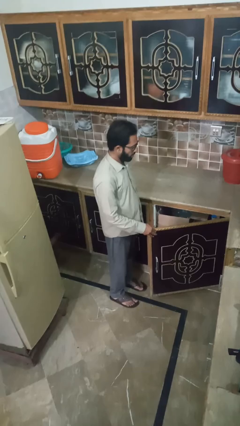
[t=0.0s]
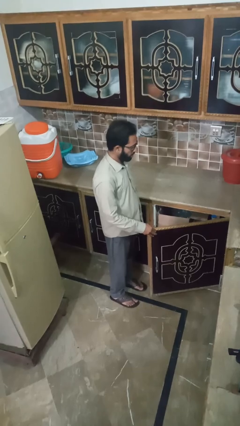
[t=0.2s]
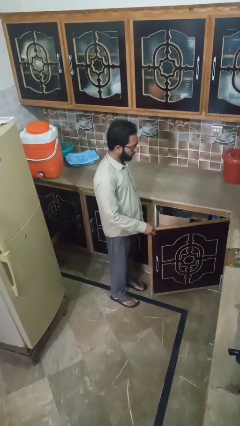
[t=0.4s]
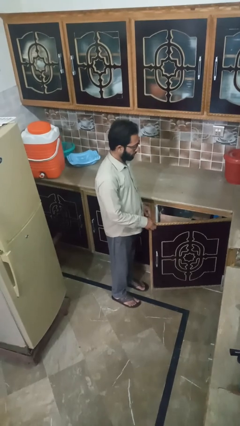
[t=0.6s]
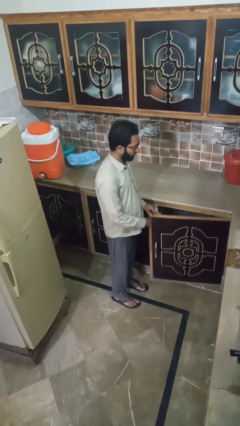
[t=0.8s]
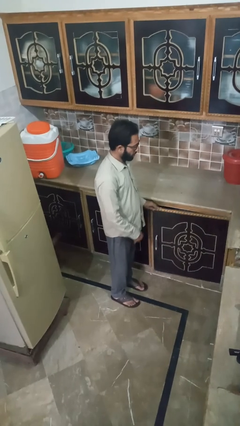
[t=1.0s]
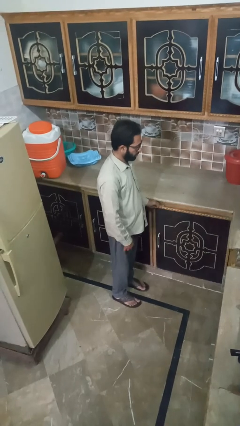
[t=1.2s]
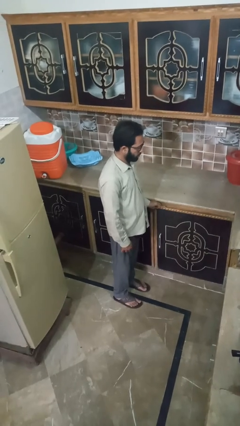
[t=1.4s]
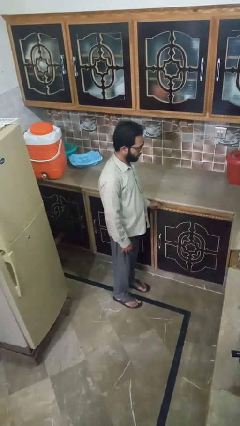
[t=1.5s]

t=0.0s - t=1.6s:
person closes cabinet

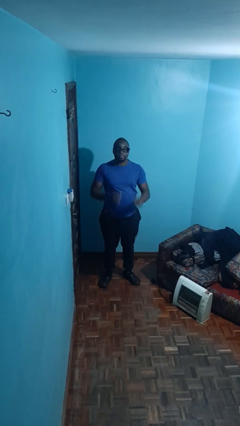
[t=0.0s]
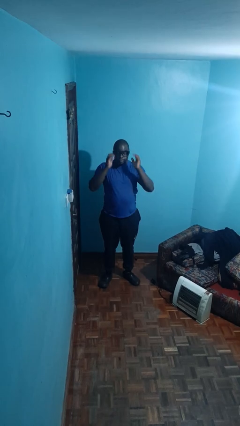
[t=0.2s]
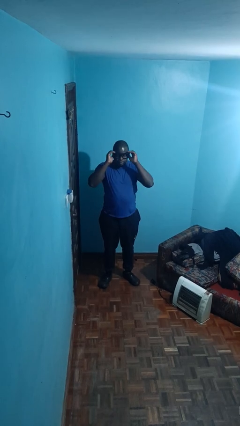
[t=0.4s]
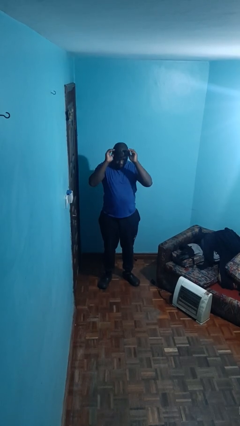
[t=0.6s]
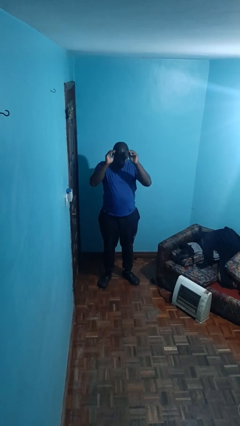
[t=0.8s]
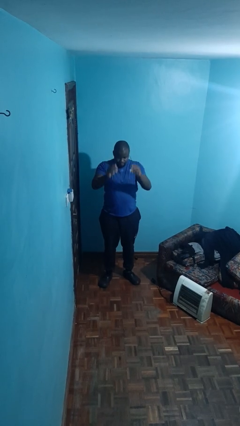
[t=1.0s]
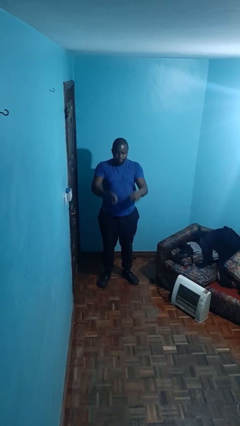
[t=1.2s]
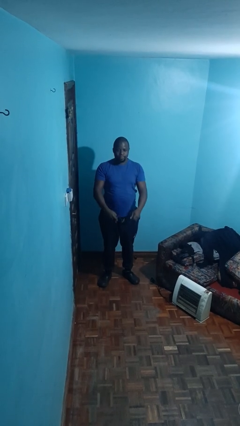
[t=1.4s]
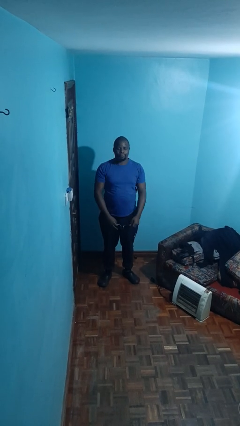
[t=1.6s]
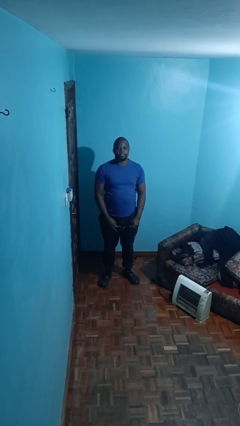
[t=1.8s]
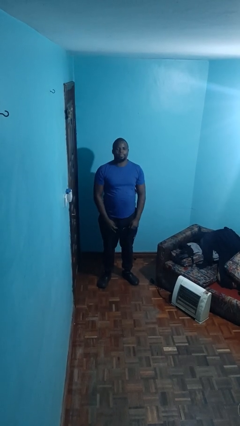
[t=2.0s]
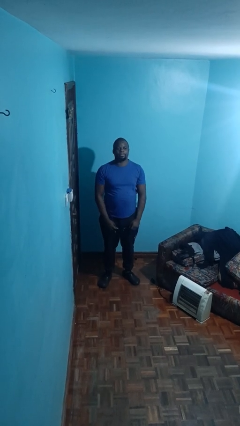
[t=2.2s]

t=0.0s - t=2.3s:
person takes off glasses

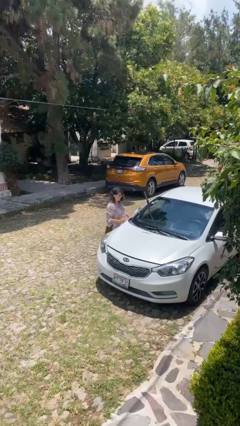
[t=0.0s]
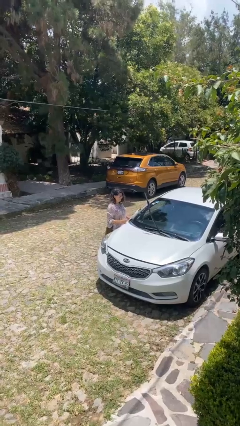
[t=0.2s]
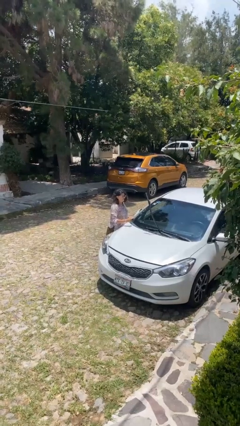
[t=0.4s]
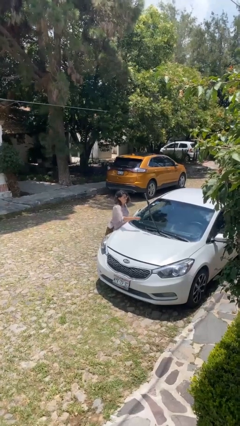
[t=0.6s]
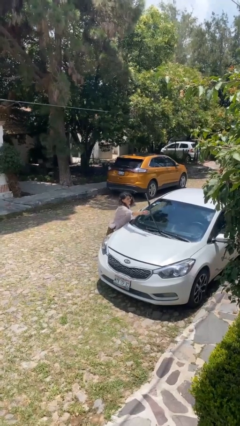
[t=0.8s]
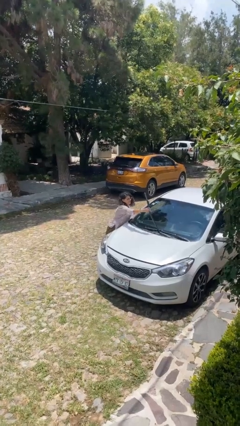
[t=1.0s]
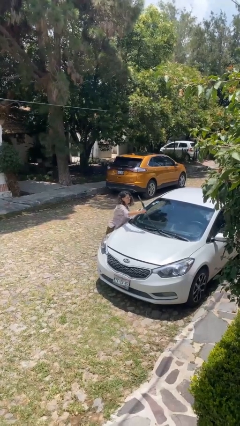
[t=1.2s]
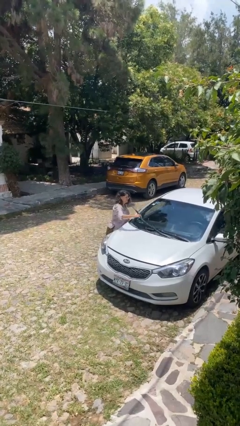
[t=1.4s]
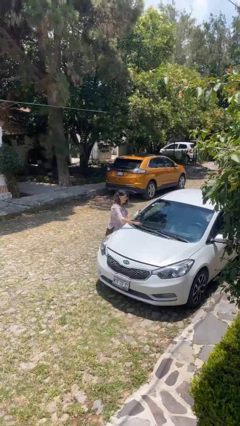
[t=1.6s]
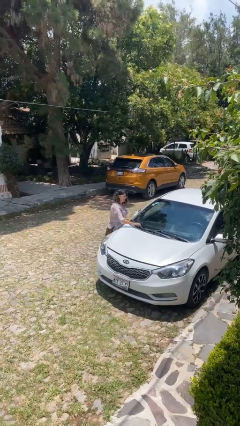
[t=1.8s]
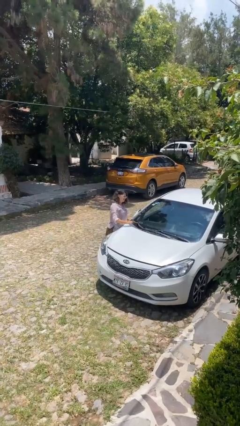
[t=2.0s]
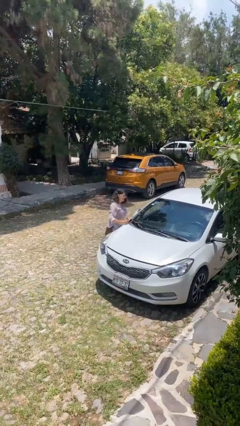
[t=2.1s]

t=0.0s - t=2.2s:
person flips down car wipers

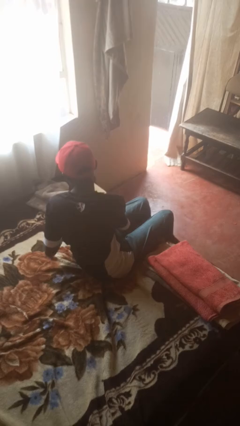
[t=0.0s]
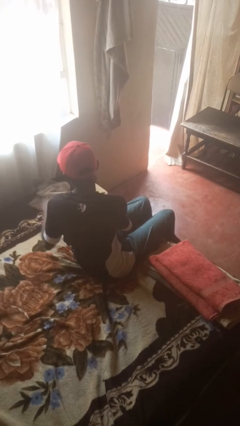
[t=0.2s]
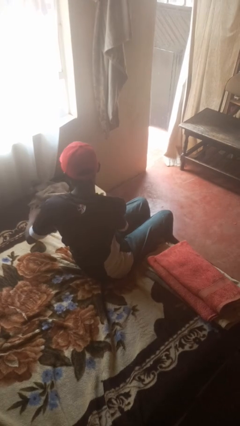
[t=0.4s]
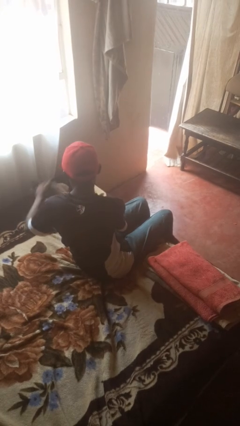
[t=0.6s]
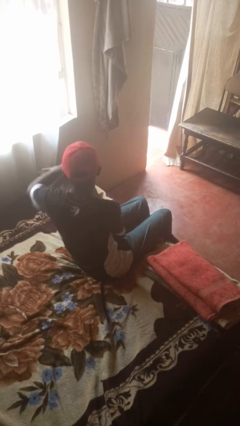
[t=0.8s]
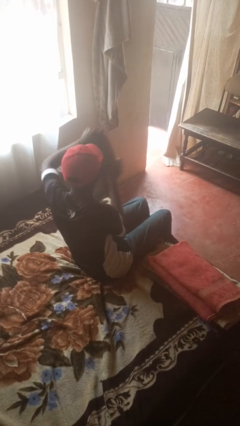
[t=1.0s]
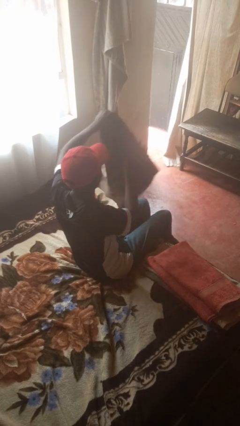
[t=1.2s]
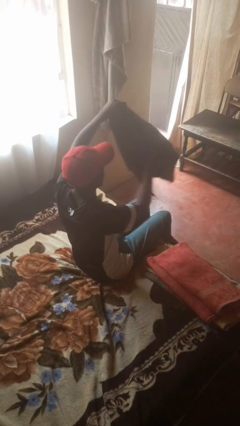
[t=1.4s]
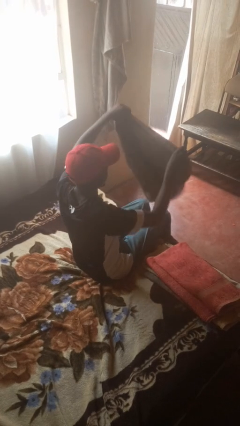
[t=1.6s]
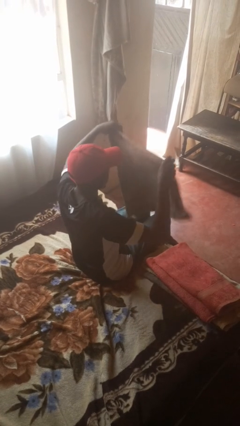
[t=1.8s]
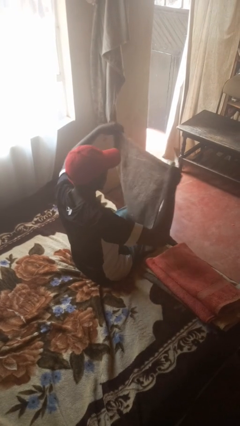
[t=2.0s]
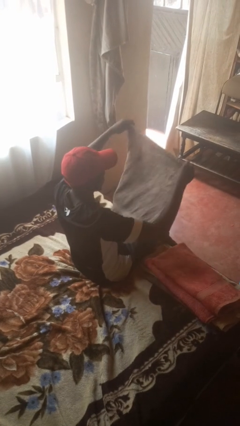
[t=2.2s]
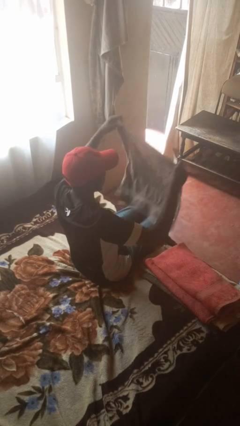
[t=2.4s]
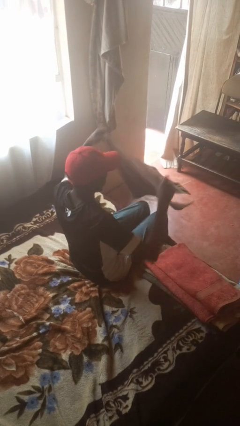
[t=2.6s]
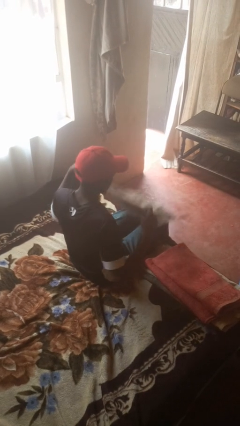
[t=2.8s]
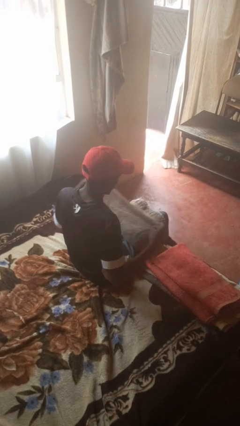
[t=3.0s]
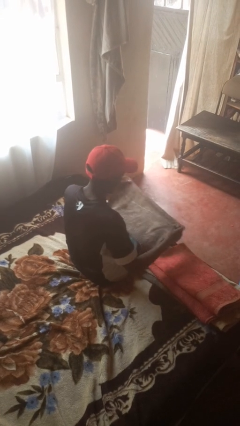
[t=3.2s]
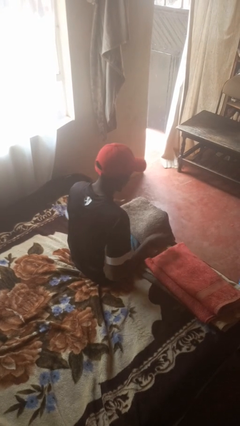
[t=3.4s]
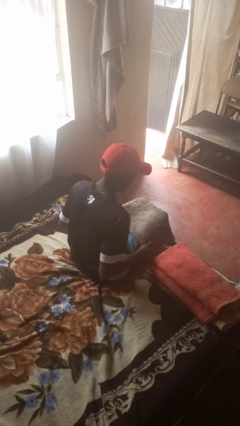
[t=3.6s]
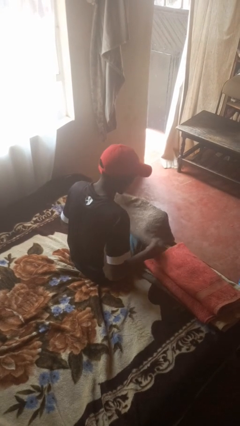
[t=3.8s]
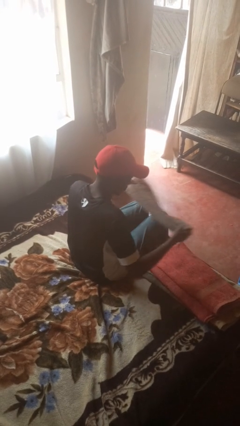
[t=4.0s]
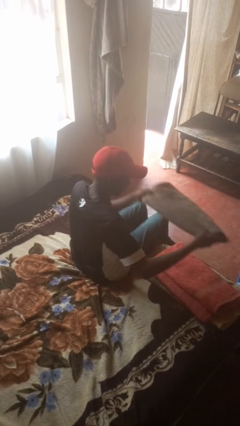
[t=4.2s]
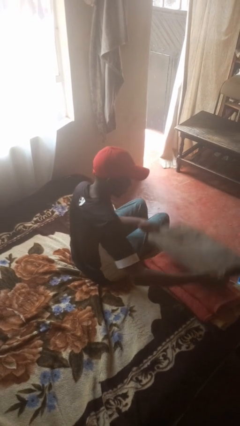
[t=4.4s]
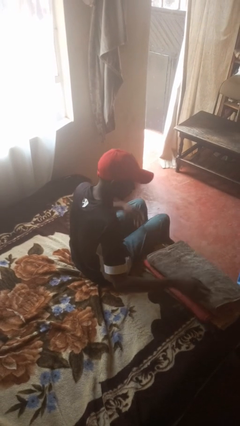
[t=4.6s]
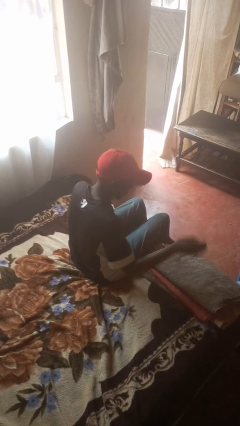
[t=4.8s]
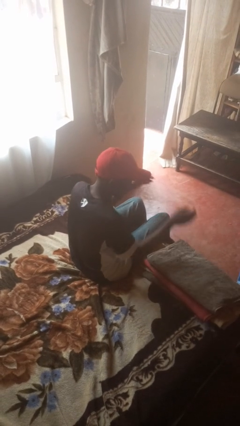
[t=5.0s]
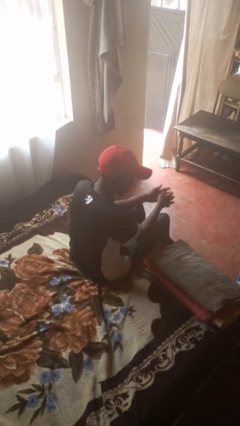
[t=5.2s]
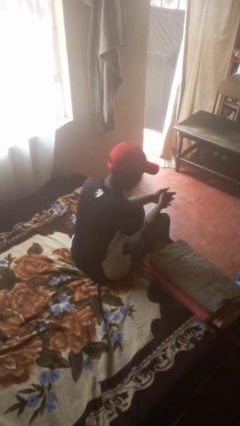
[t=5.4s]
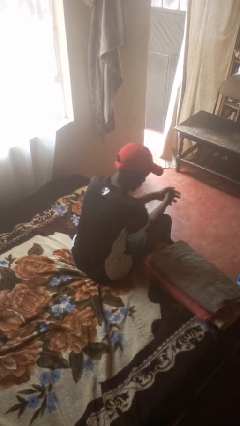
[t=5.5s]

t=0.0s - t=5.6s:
person folds towel

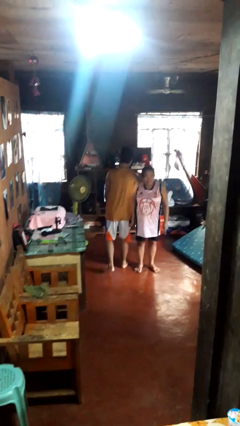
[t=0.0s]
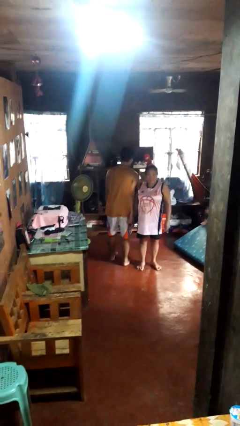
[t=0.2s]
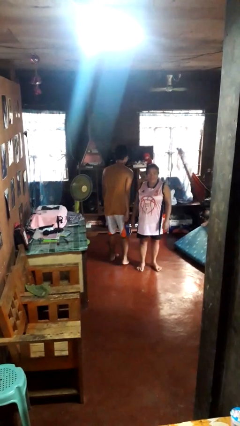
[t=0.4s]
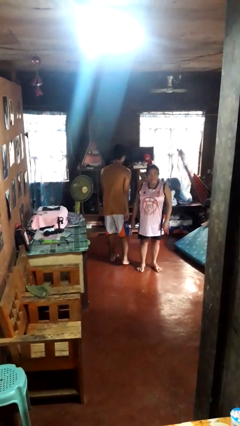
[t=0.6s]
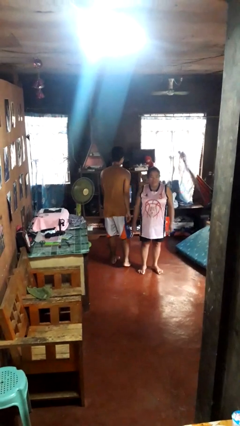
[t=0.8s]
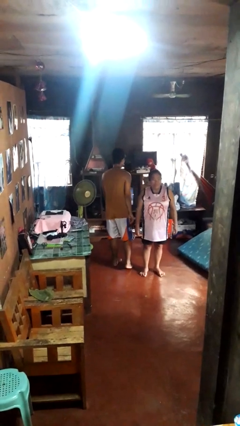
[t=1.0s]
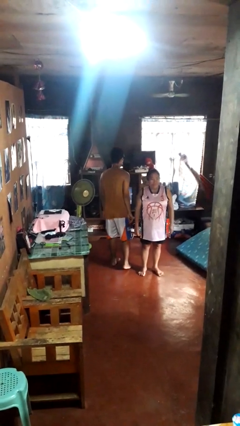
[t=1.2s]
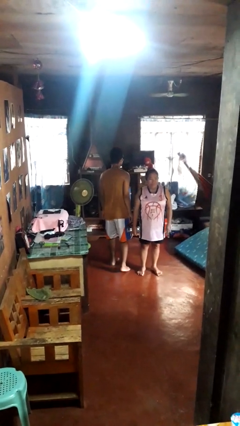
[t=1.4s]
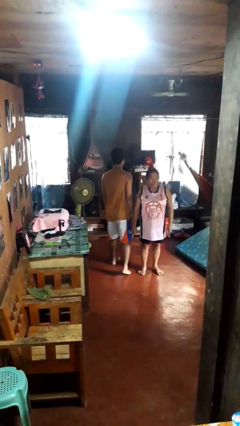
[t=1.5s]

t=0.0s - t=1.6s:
person bumps into person

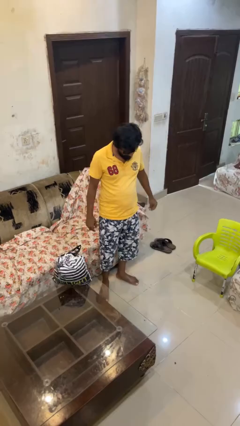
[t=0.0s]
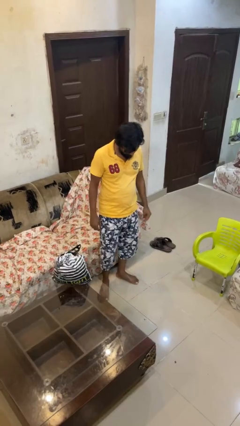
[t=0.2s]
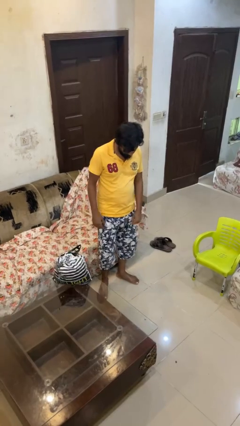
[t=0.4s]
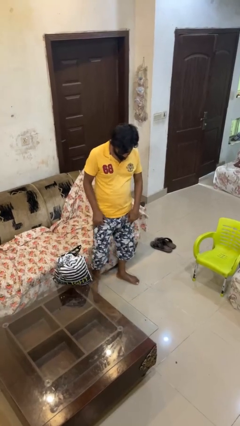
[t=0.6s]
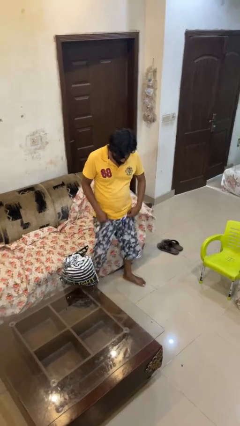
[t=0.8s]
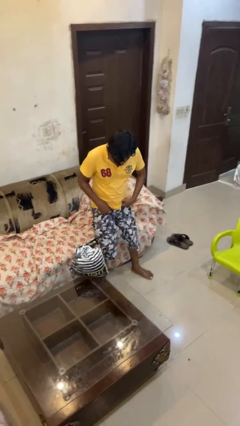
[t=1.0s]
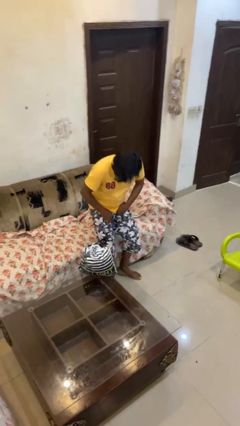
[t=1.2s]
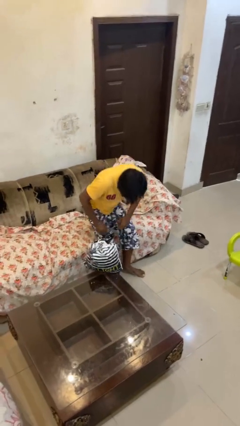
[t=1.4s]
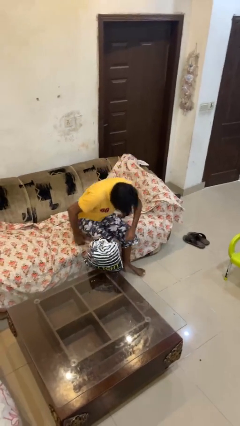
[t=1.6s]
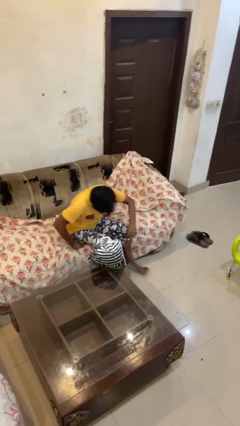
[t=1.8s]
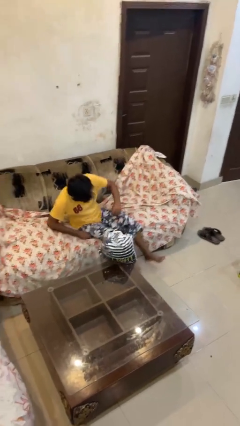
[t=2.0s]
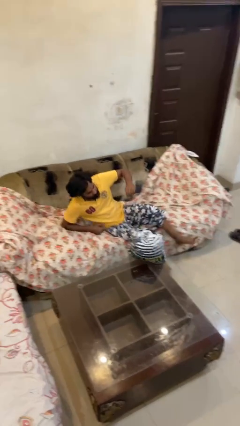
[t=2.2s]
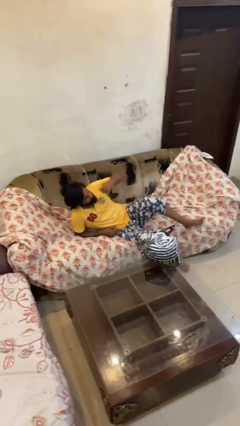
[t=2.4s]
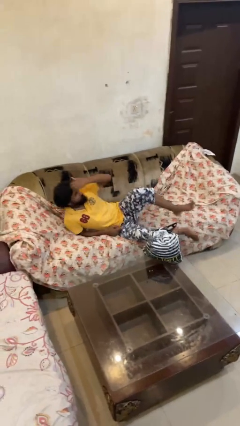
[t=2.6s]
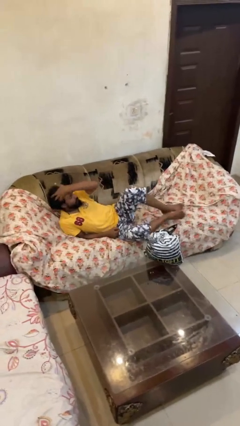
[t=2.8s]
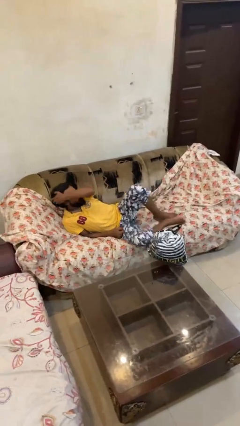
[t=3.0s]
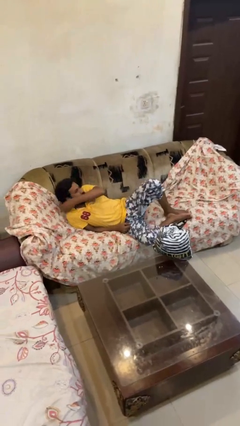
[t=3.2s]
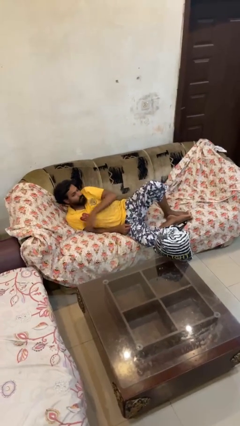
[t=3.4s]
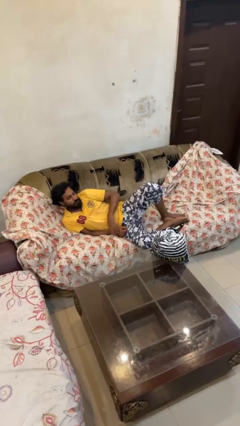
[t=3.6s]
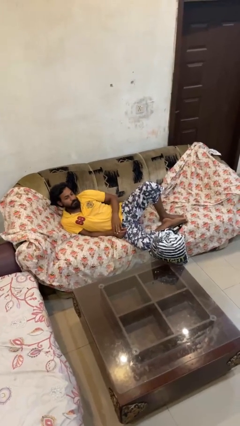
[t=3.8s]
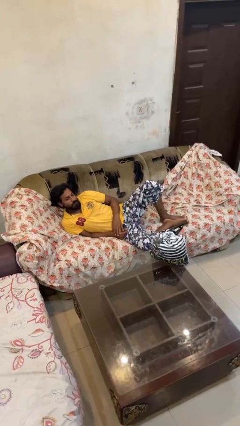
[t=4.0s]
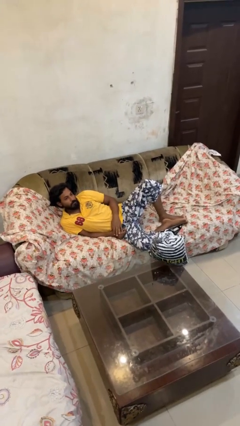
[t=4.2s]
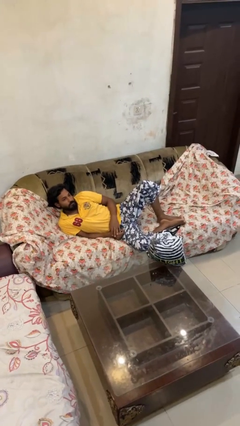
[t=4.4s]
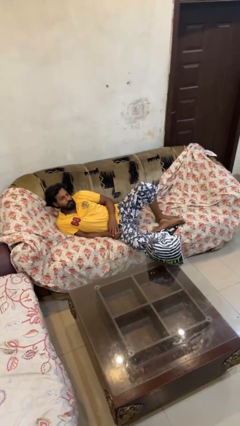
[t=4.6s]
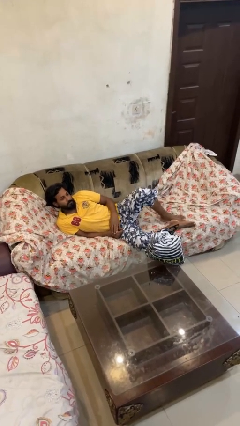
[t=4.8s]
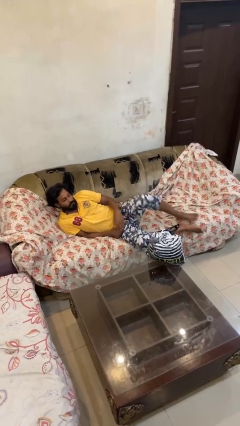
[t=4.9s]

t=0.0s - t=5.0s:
person lies down on couch
